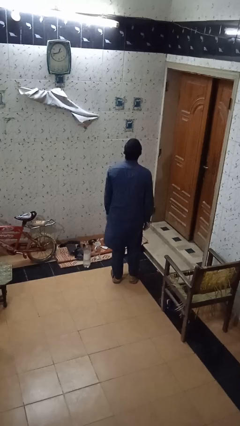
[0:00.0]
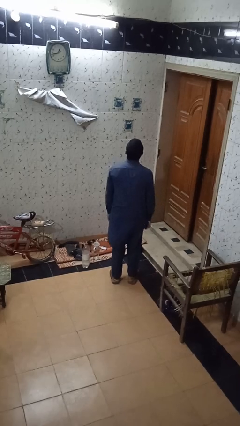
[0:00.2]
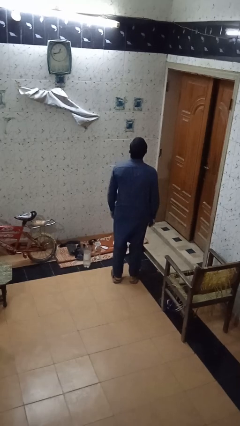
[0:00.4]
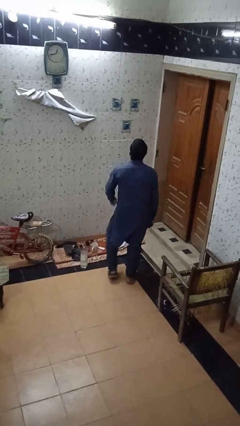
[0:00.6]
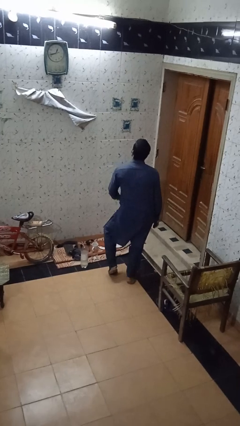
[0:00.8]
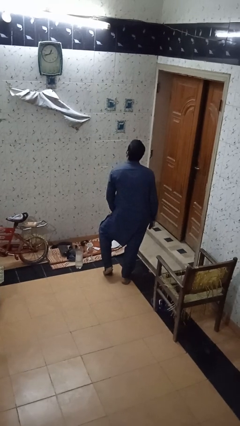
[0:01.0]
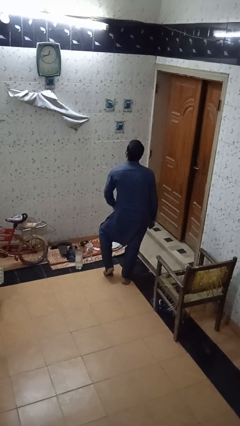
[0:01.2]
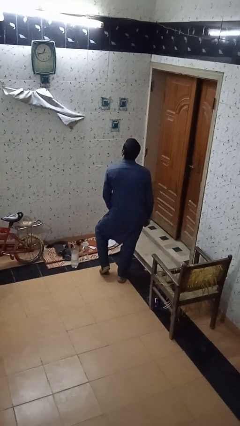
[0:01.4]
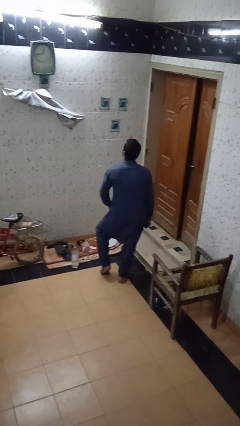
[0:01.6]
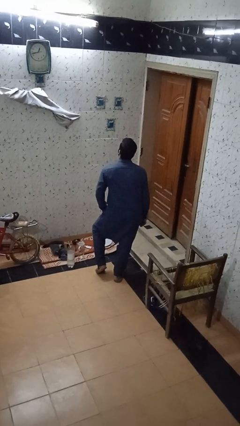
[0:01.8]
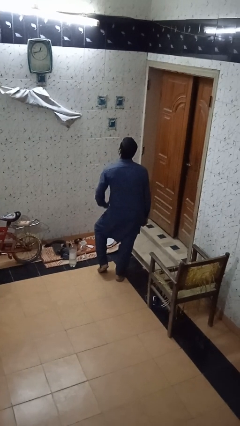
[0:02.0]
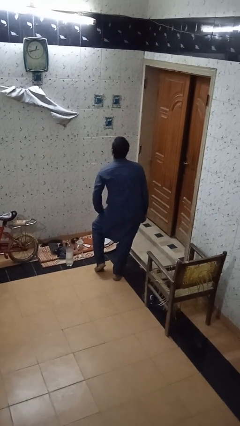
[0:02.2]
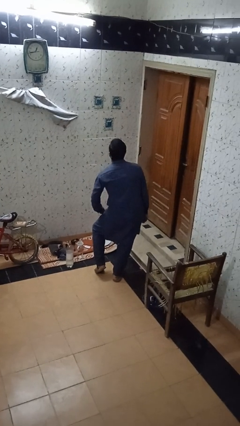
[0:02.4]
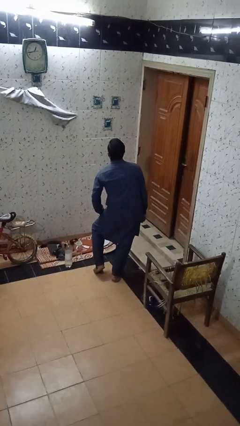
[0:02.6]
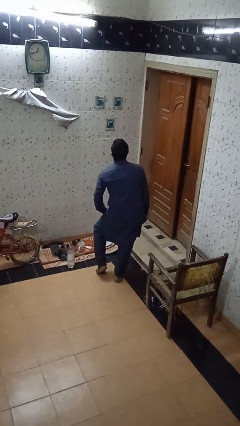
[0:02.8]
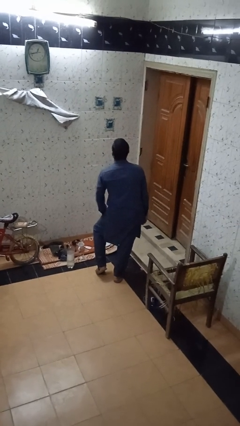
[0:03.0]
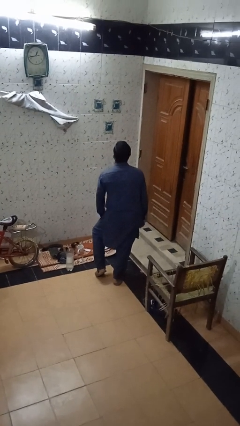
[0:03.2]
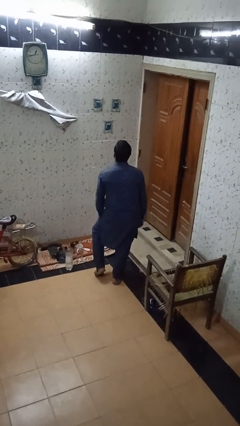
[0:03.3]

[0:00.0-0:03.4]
person slaps hands on thighs

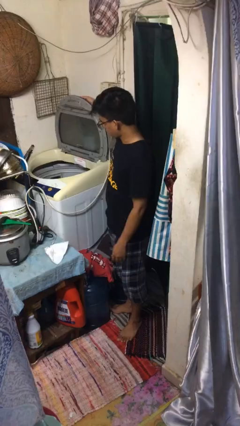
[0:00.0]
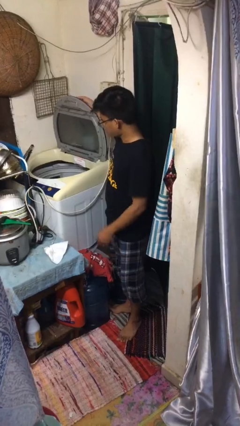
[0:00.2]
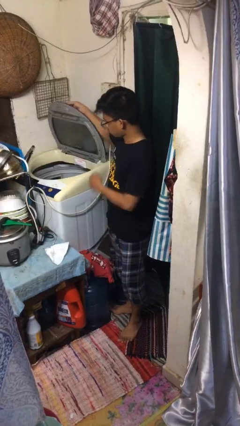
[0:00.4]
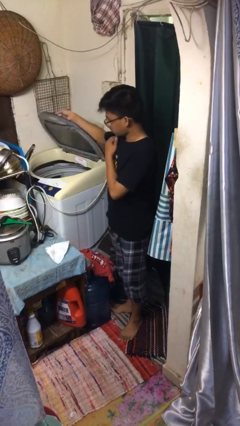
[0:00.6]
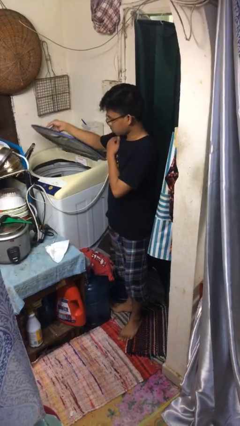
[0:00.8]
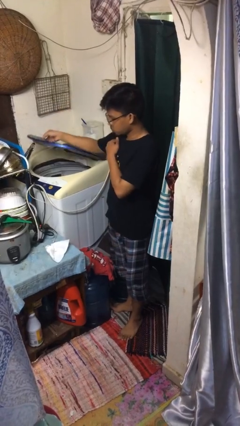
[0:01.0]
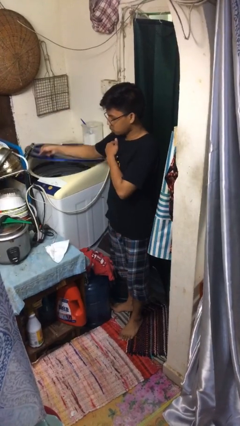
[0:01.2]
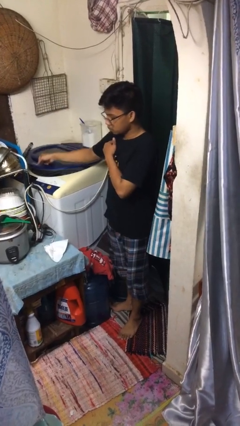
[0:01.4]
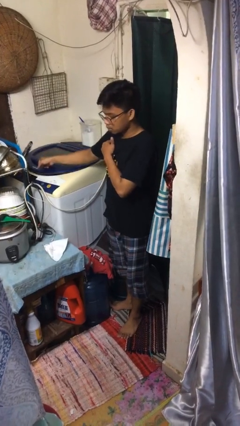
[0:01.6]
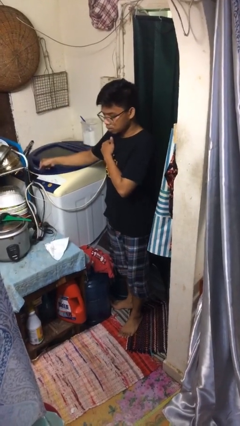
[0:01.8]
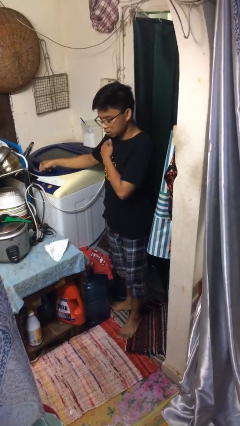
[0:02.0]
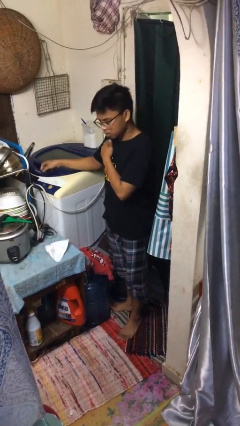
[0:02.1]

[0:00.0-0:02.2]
person closes clothes washer

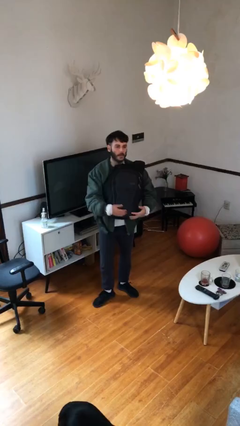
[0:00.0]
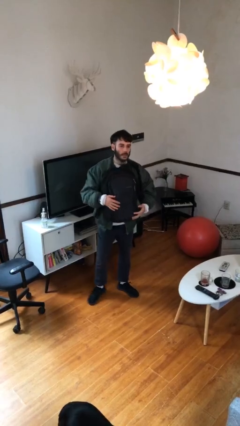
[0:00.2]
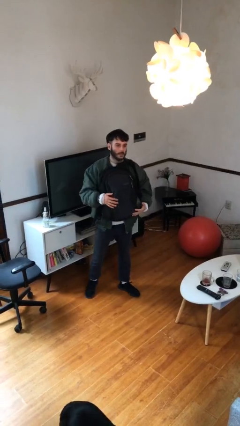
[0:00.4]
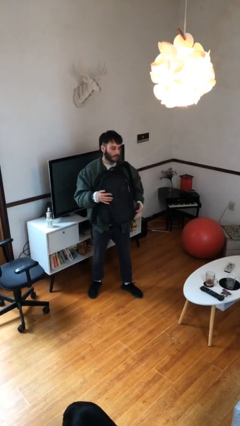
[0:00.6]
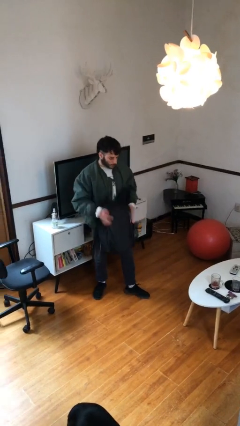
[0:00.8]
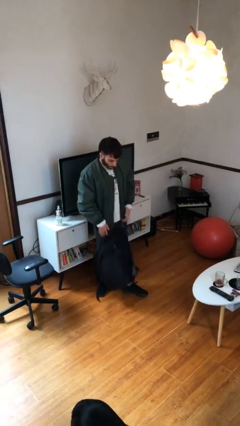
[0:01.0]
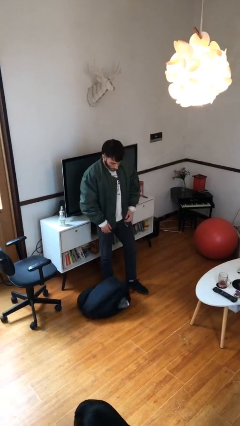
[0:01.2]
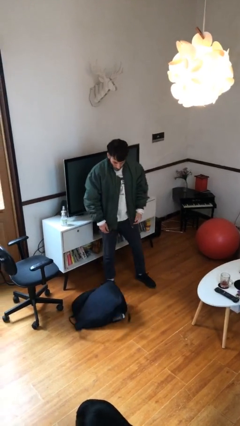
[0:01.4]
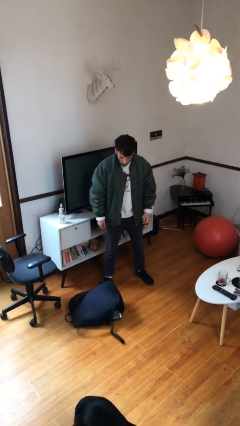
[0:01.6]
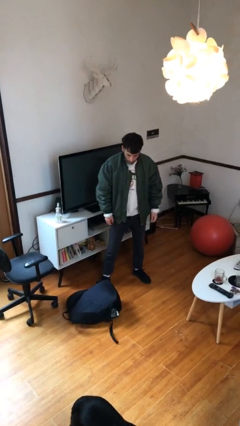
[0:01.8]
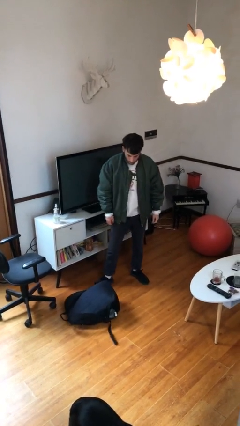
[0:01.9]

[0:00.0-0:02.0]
person drops object

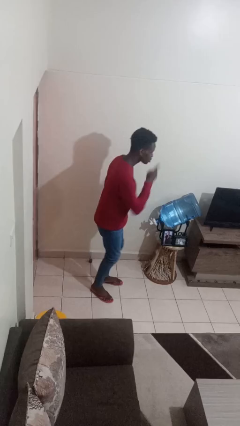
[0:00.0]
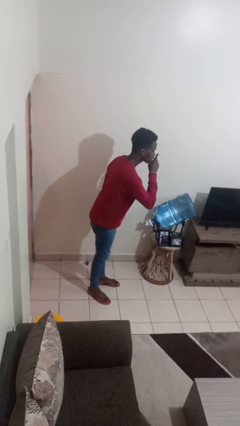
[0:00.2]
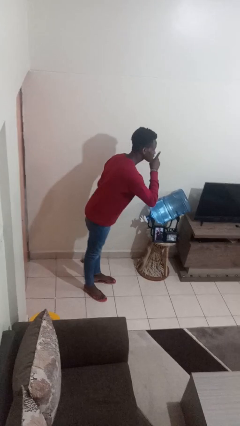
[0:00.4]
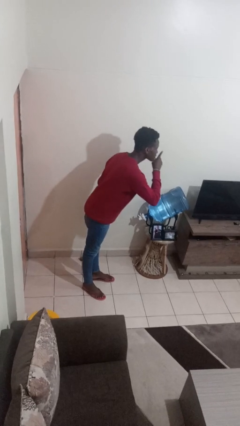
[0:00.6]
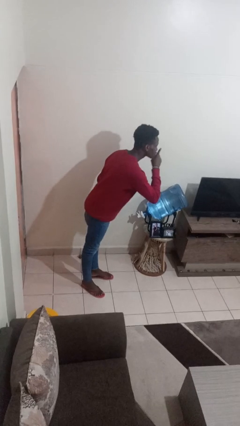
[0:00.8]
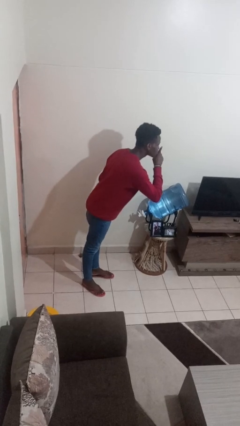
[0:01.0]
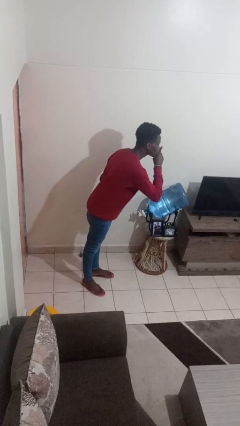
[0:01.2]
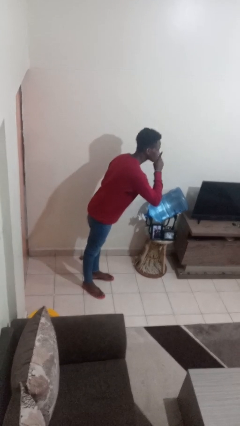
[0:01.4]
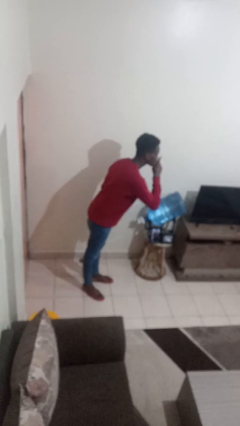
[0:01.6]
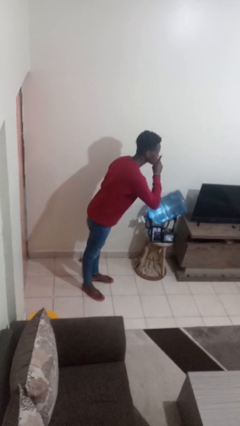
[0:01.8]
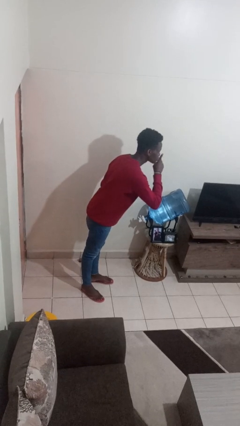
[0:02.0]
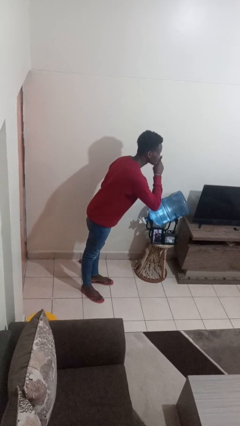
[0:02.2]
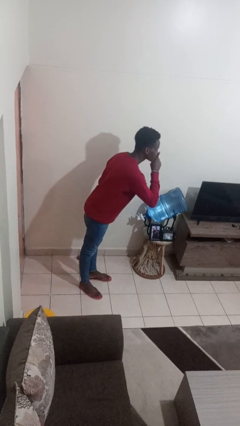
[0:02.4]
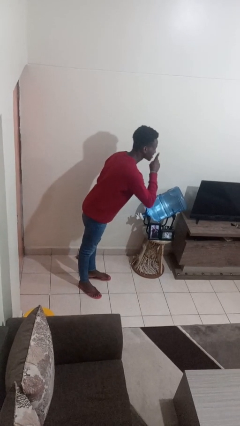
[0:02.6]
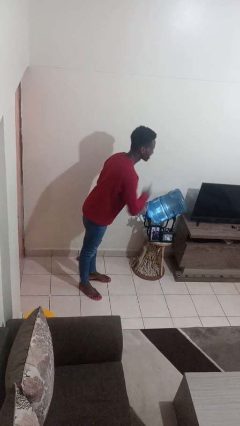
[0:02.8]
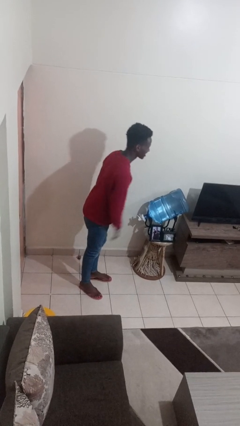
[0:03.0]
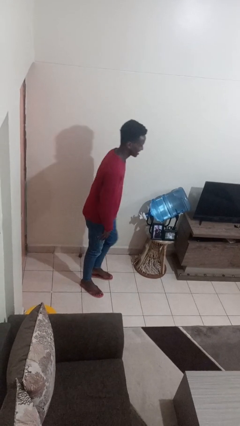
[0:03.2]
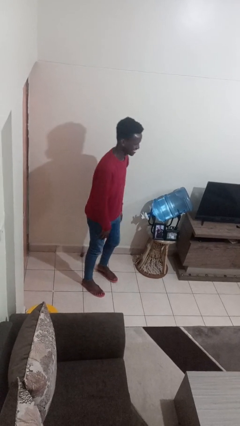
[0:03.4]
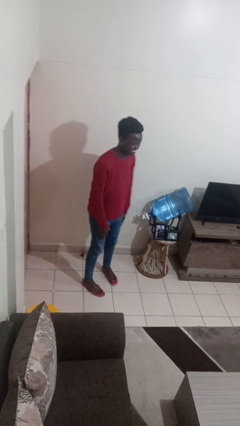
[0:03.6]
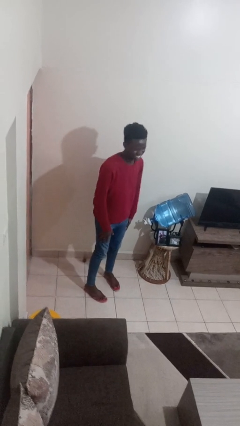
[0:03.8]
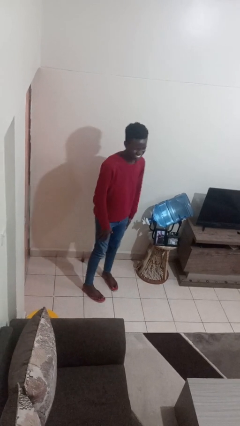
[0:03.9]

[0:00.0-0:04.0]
person gestures be quiet

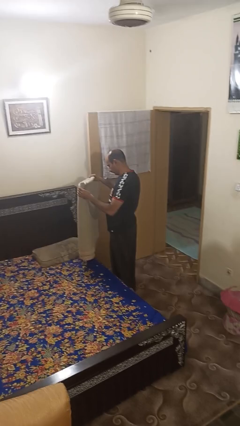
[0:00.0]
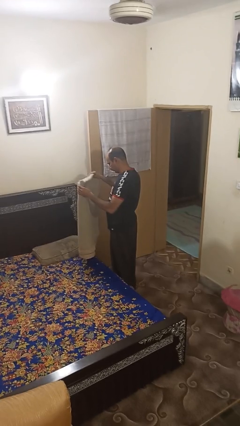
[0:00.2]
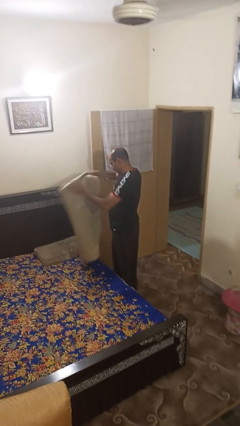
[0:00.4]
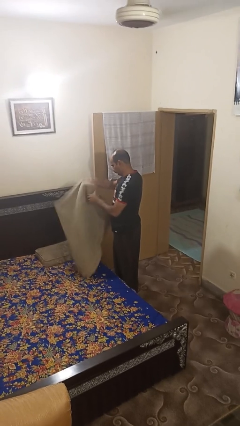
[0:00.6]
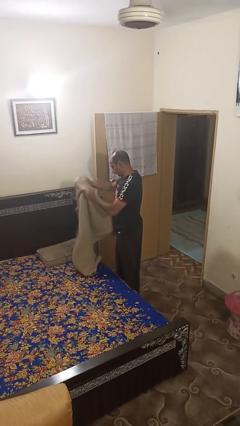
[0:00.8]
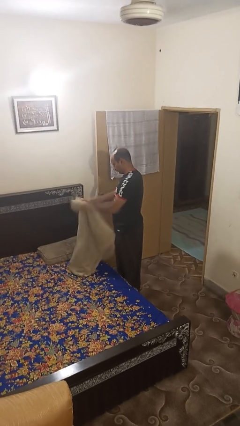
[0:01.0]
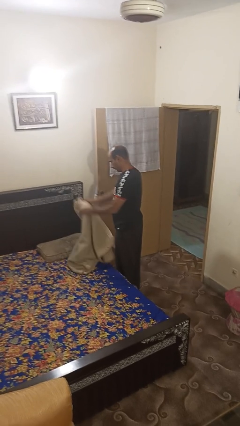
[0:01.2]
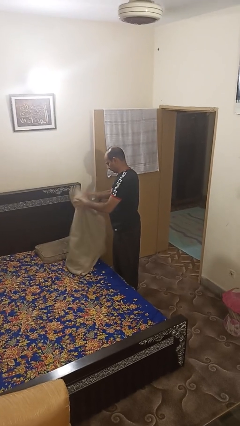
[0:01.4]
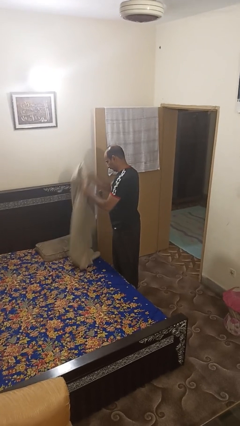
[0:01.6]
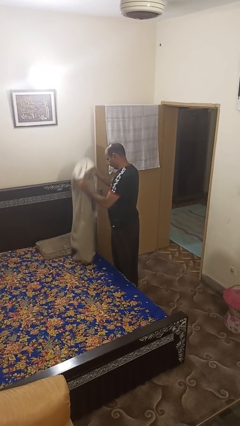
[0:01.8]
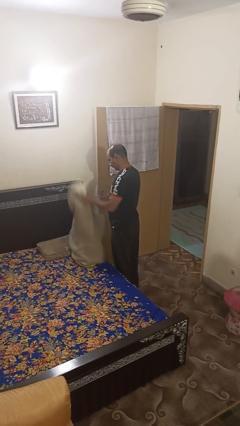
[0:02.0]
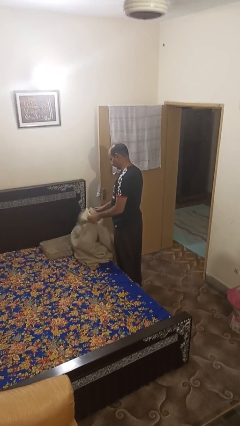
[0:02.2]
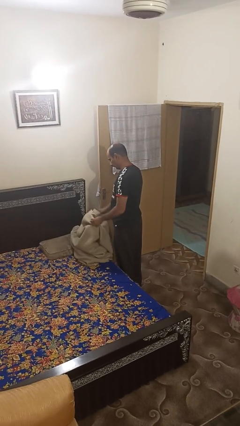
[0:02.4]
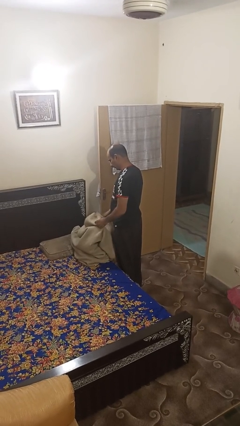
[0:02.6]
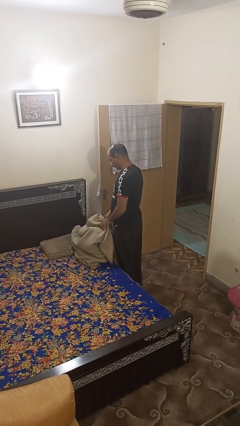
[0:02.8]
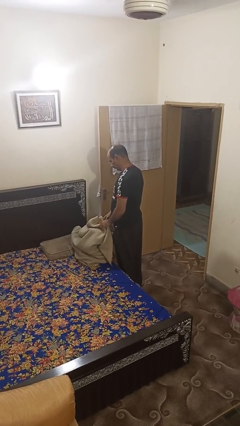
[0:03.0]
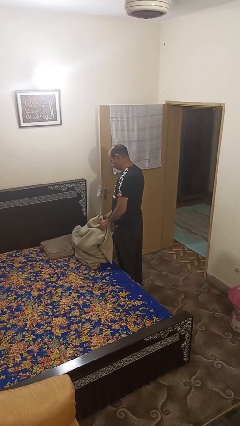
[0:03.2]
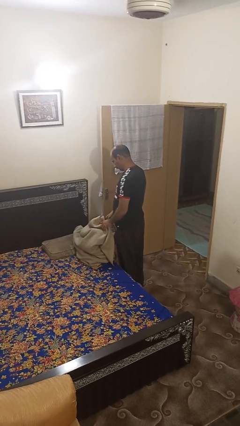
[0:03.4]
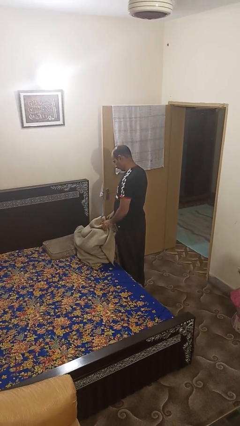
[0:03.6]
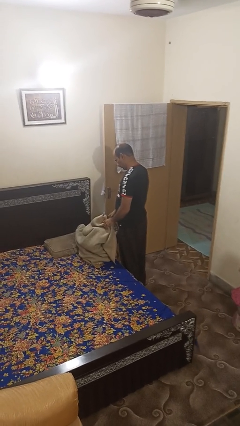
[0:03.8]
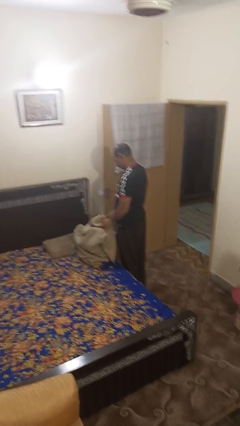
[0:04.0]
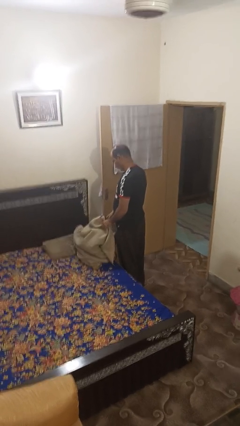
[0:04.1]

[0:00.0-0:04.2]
person unfolds blanket

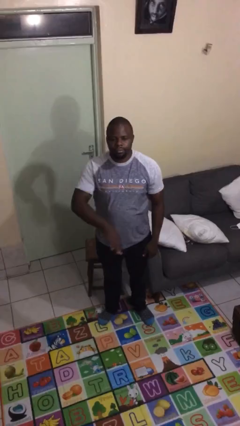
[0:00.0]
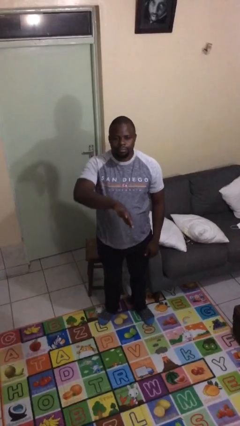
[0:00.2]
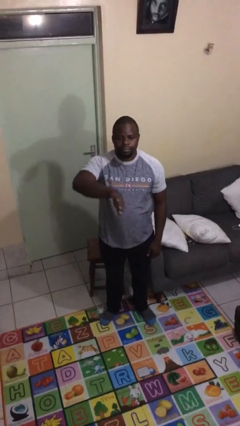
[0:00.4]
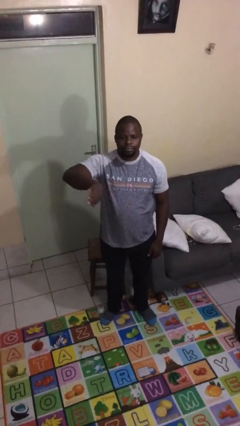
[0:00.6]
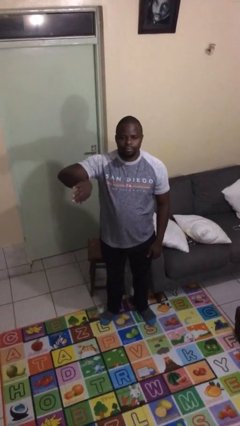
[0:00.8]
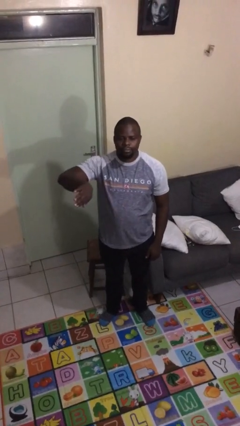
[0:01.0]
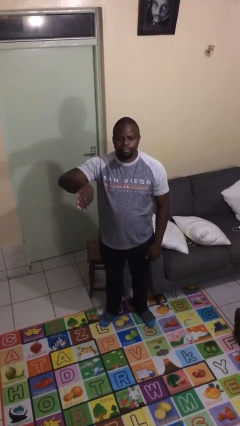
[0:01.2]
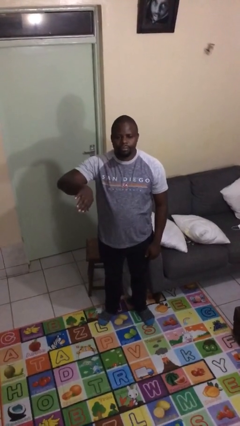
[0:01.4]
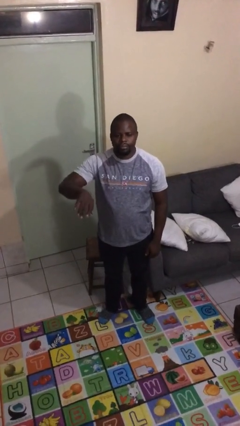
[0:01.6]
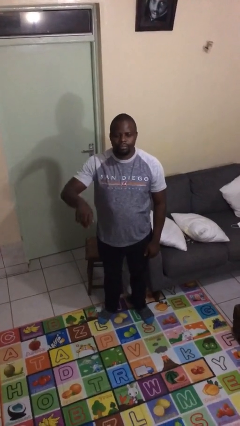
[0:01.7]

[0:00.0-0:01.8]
person gestures swipe right
